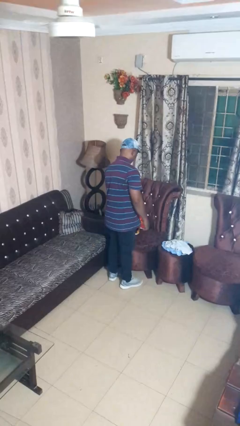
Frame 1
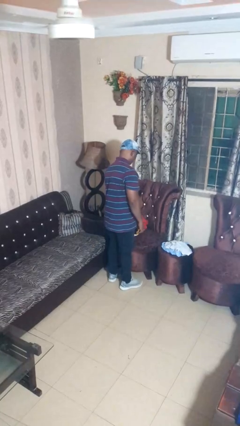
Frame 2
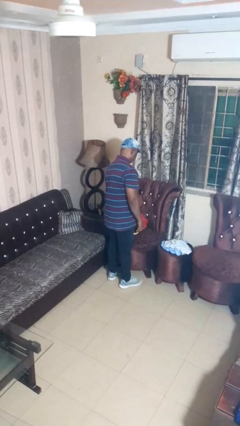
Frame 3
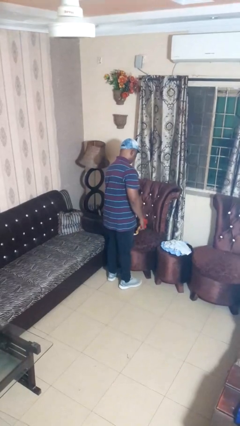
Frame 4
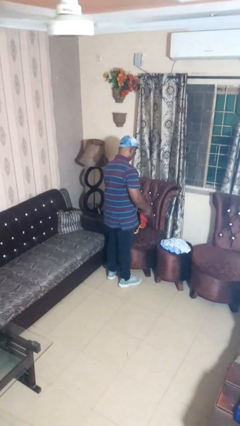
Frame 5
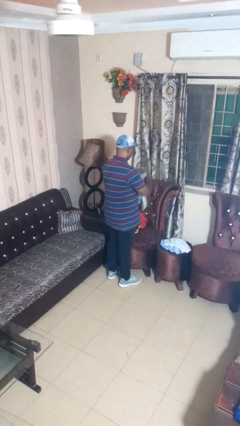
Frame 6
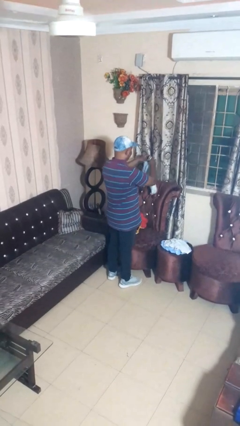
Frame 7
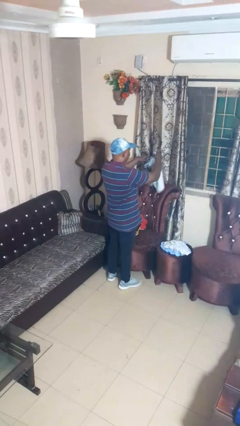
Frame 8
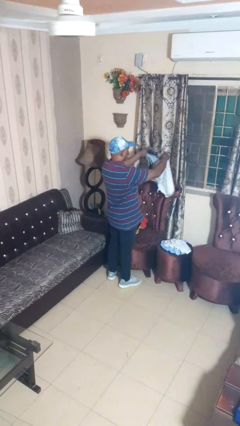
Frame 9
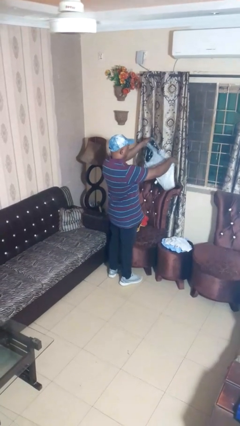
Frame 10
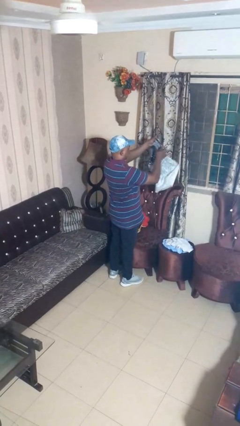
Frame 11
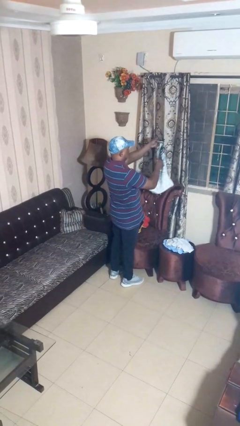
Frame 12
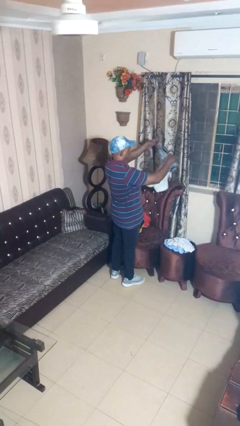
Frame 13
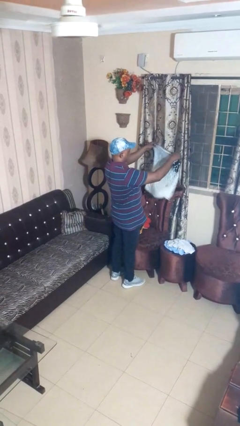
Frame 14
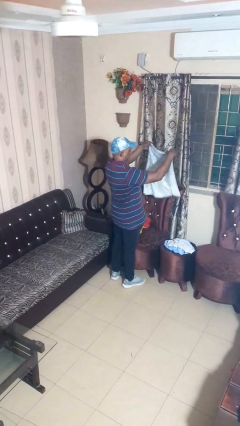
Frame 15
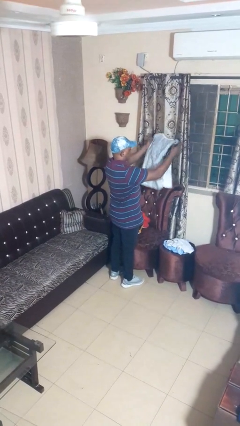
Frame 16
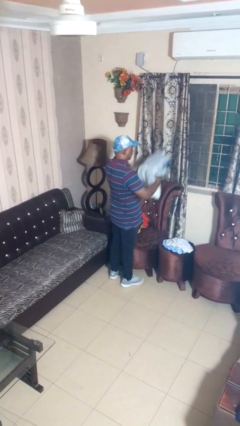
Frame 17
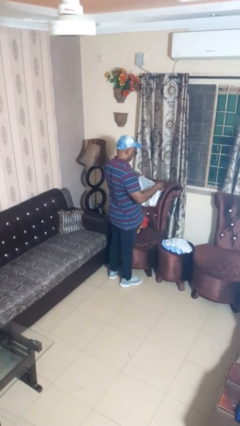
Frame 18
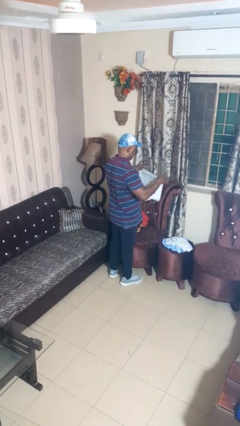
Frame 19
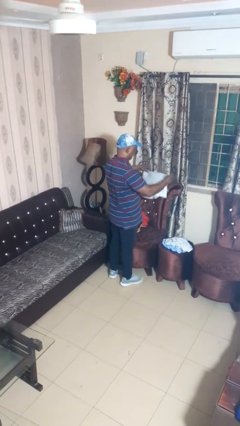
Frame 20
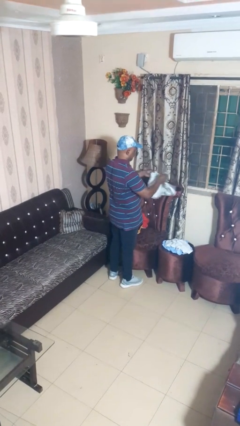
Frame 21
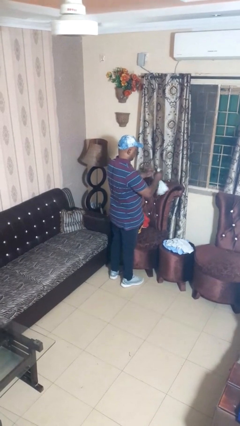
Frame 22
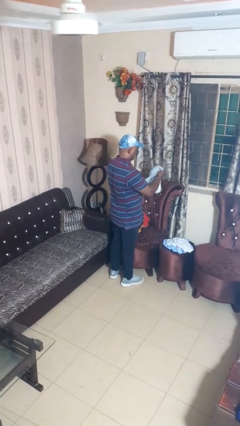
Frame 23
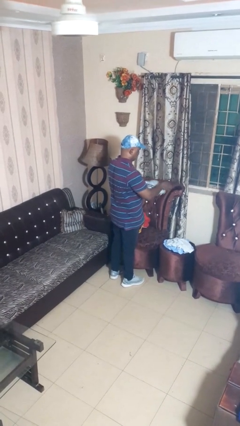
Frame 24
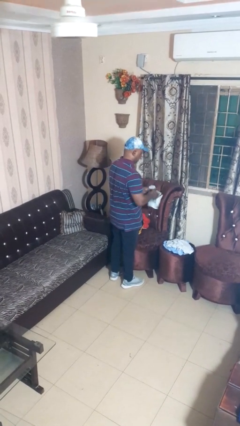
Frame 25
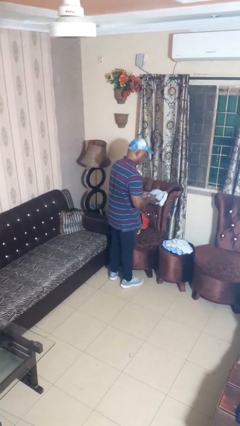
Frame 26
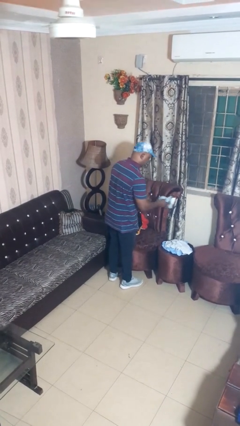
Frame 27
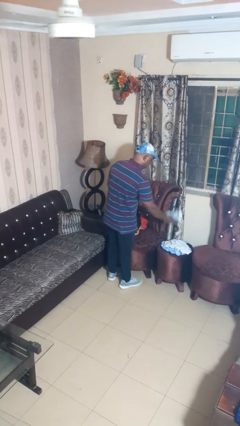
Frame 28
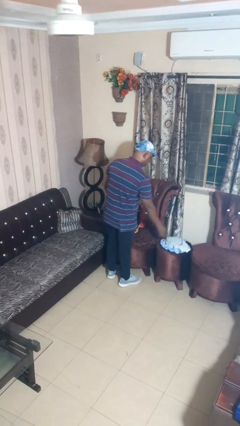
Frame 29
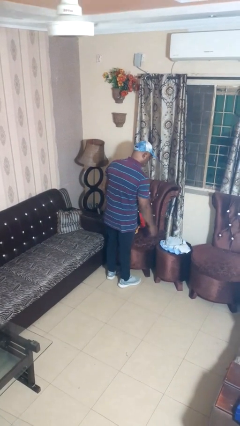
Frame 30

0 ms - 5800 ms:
person folds shirt

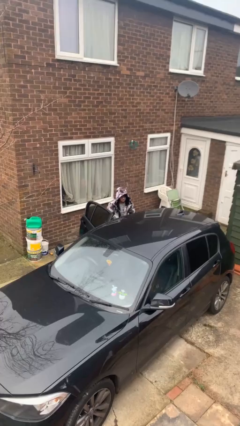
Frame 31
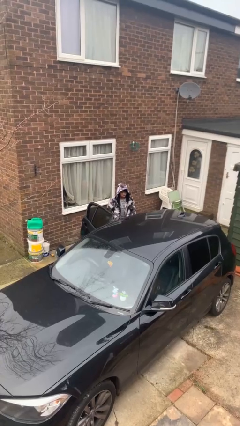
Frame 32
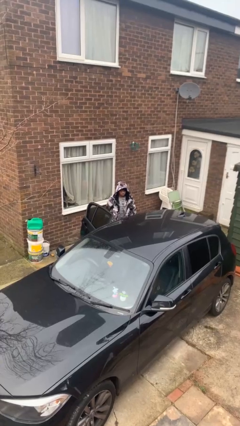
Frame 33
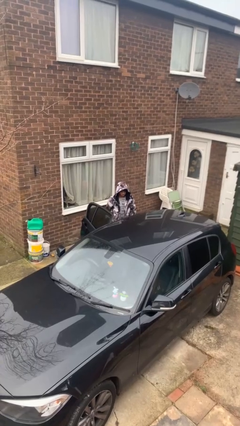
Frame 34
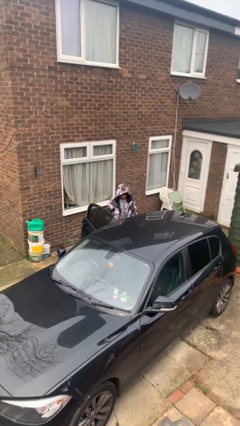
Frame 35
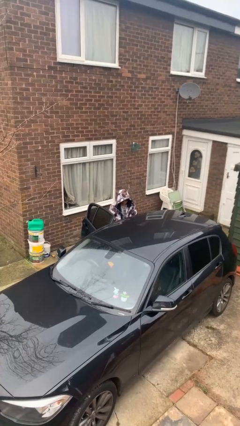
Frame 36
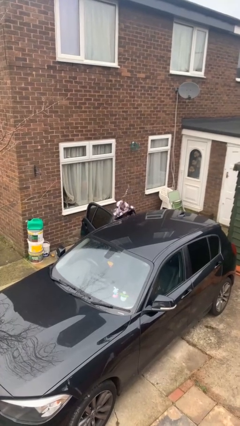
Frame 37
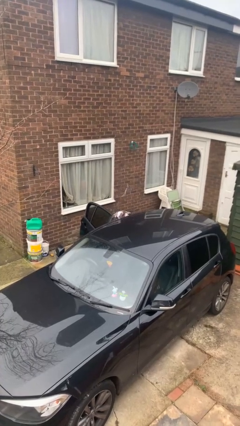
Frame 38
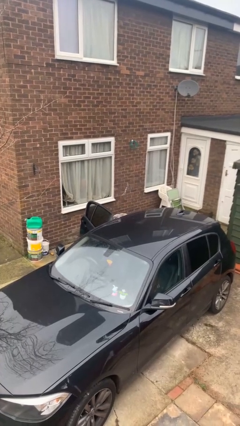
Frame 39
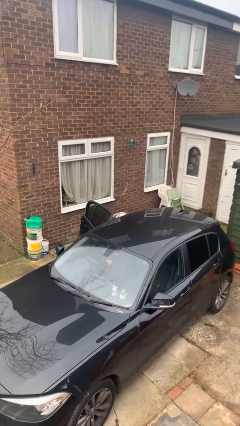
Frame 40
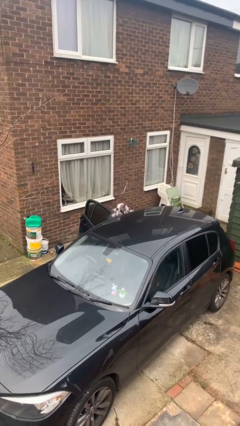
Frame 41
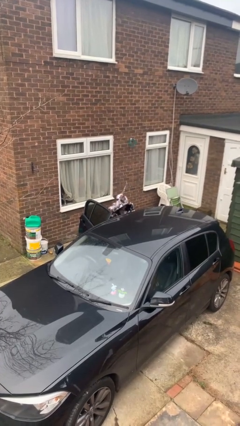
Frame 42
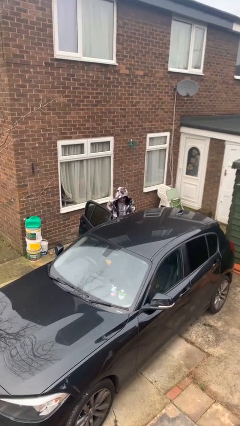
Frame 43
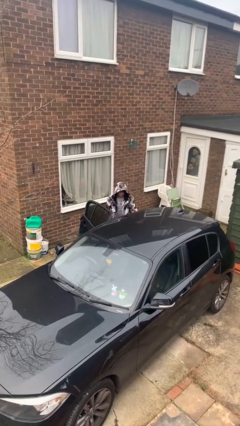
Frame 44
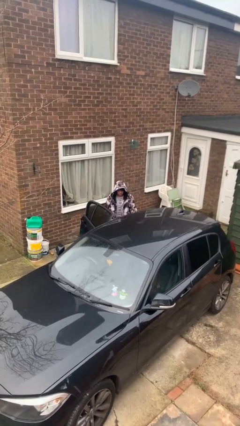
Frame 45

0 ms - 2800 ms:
person unloads car

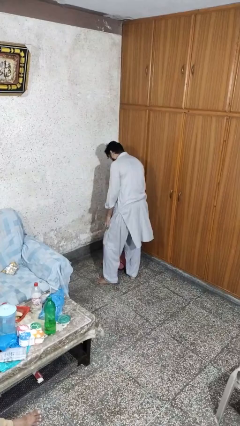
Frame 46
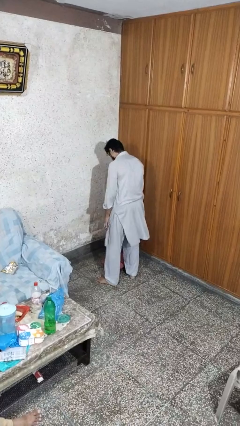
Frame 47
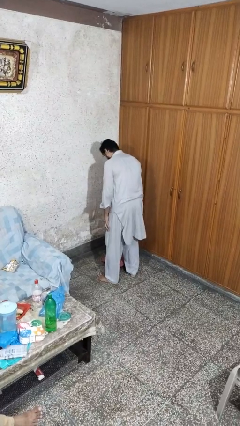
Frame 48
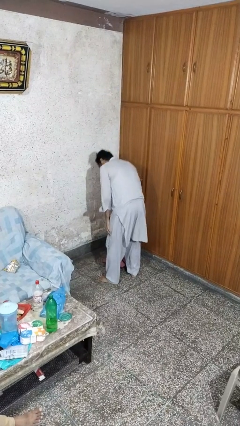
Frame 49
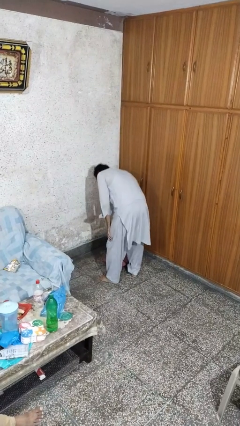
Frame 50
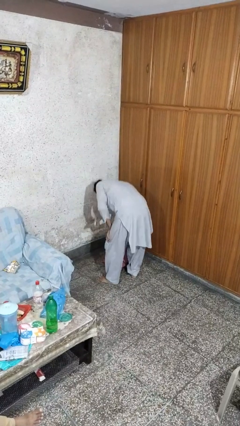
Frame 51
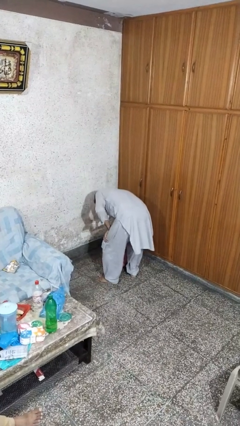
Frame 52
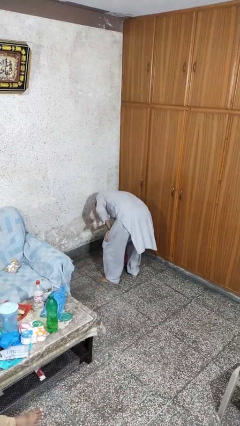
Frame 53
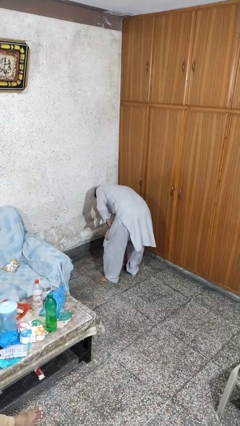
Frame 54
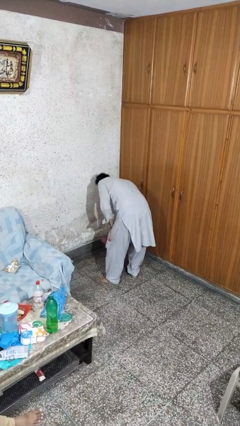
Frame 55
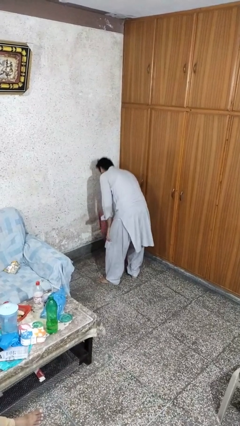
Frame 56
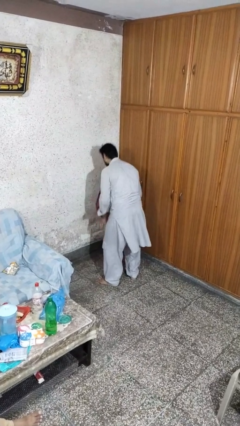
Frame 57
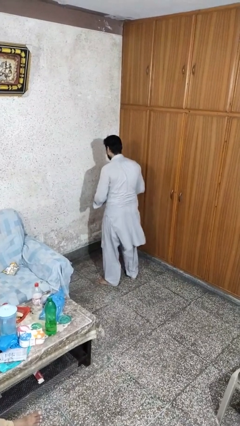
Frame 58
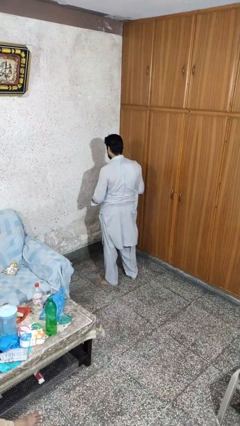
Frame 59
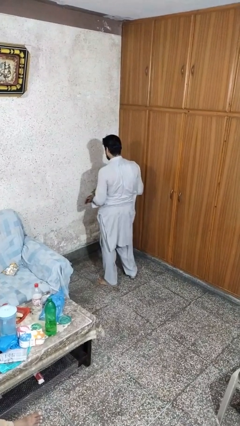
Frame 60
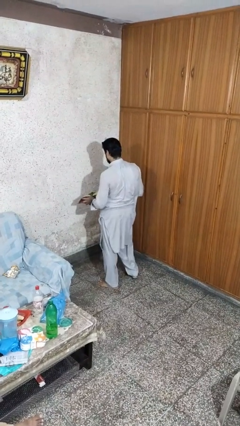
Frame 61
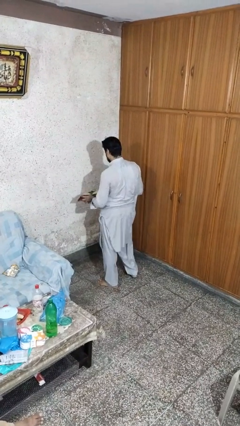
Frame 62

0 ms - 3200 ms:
person picks up object from floor

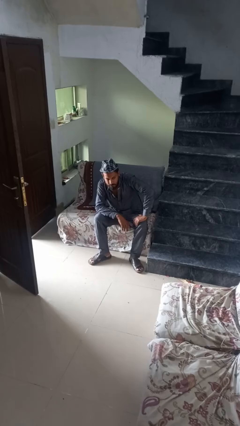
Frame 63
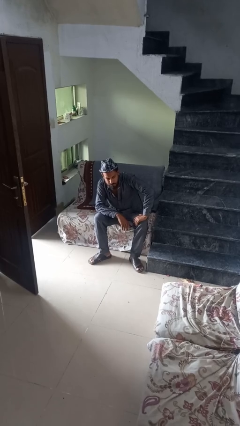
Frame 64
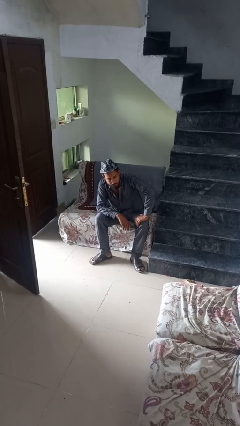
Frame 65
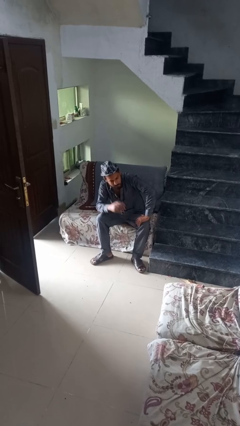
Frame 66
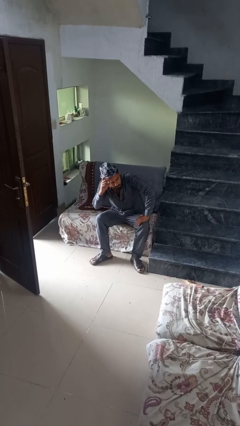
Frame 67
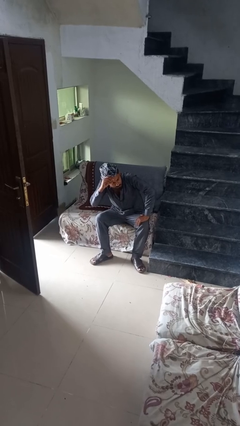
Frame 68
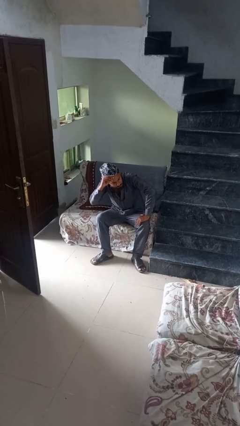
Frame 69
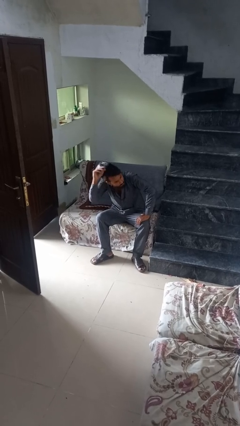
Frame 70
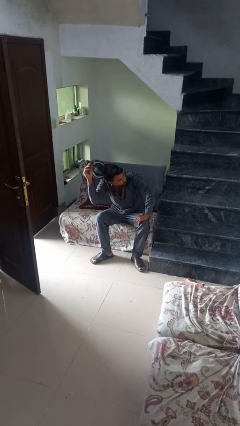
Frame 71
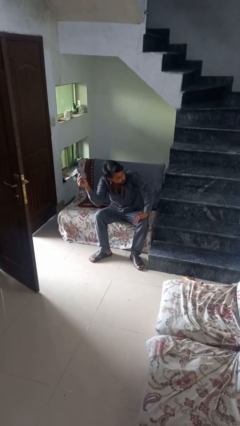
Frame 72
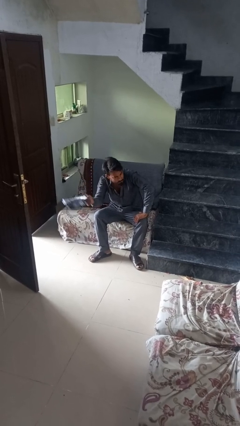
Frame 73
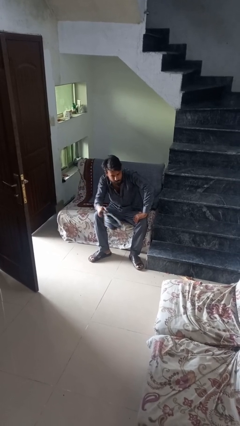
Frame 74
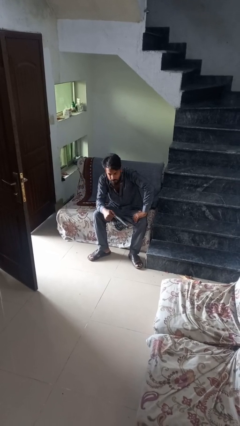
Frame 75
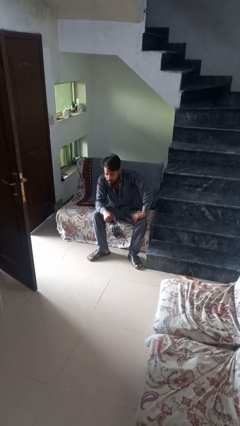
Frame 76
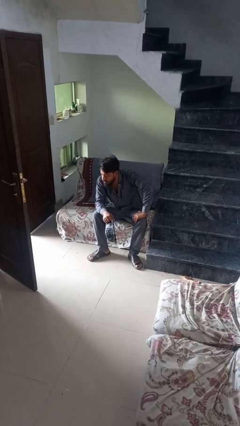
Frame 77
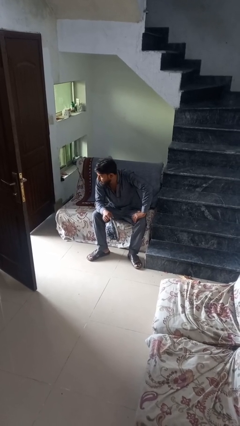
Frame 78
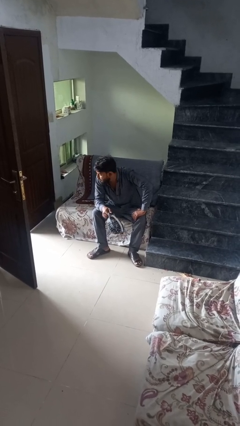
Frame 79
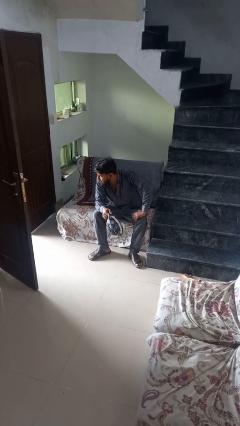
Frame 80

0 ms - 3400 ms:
person takes off hat

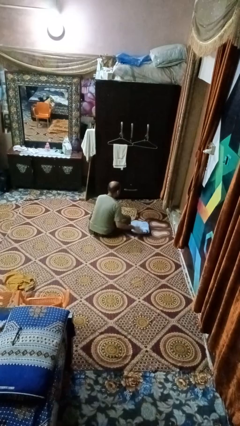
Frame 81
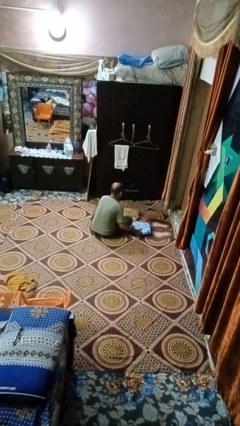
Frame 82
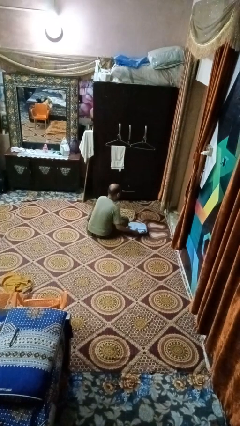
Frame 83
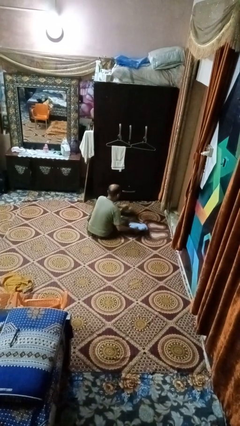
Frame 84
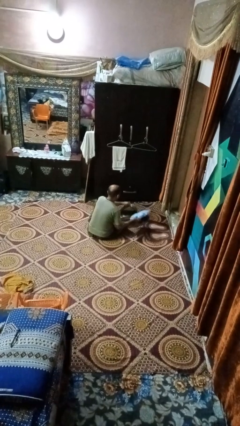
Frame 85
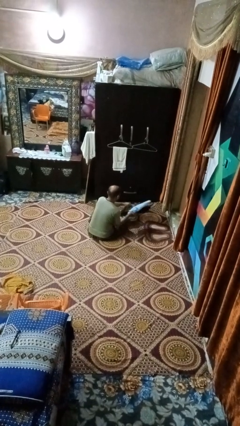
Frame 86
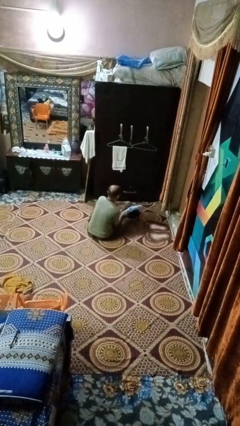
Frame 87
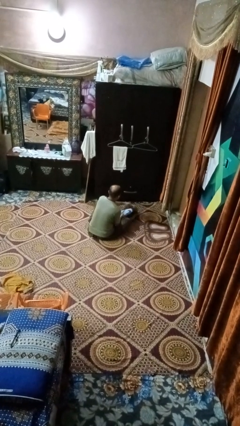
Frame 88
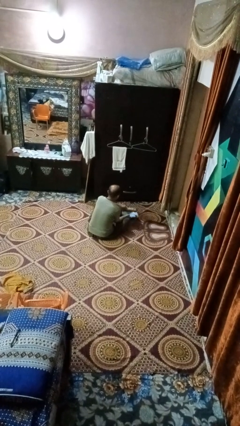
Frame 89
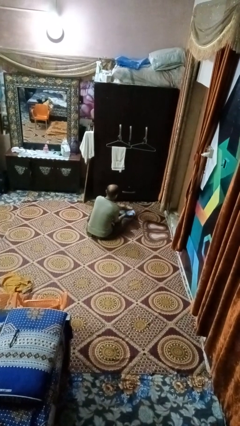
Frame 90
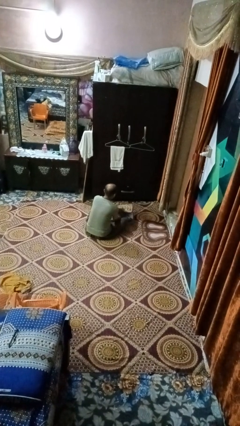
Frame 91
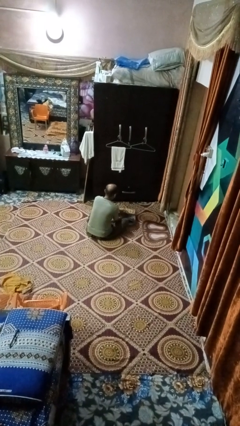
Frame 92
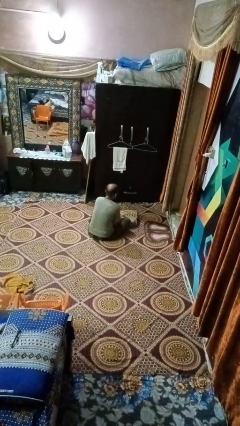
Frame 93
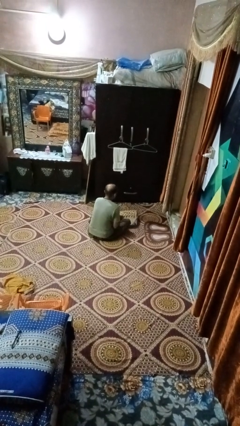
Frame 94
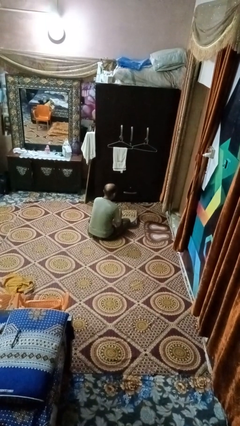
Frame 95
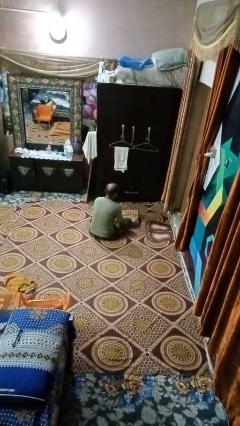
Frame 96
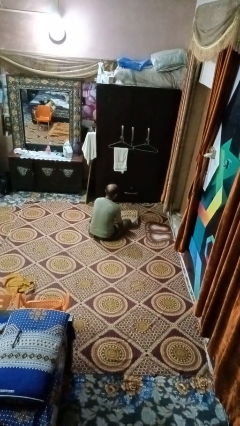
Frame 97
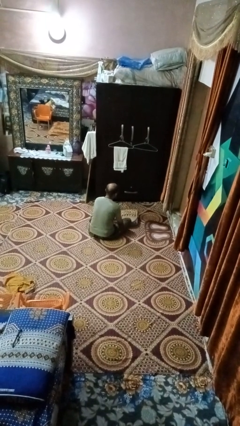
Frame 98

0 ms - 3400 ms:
person puts on backpack
